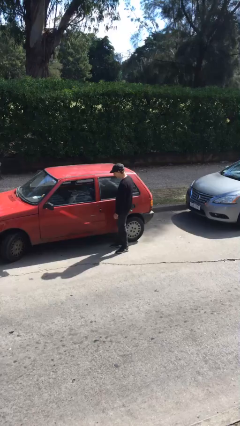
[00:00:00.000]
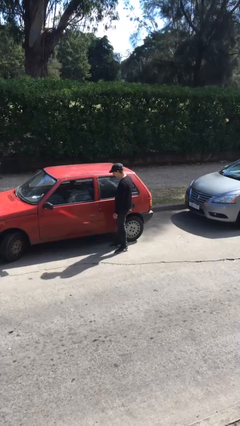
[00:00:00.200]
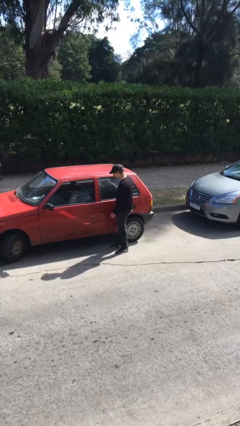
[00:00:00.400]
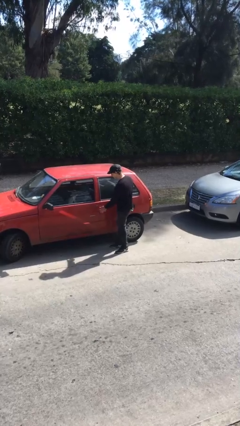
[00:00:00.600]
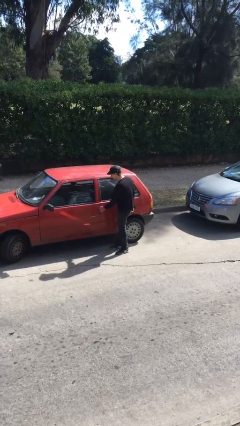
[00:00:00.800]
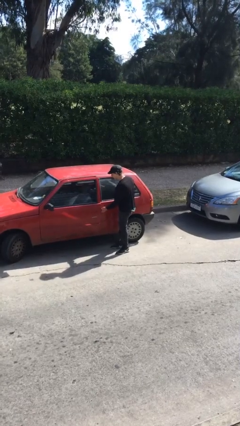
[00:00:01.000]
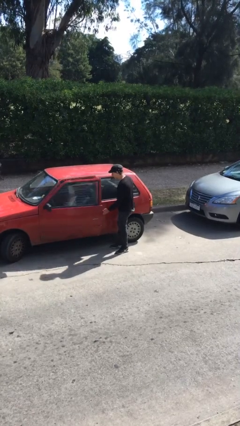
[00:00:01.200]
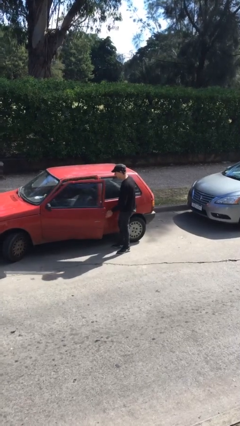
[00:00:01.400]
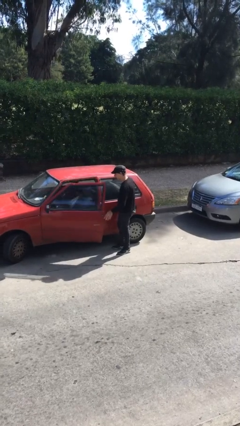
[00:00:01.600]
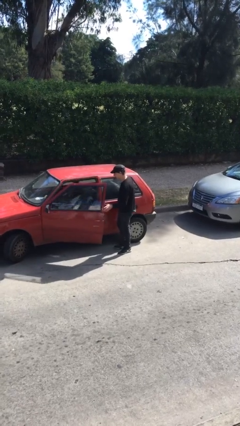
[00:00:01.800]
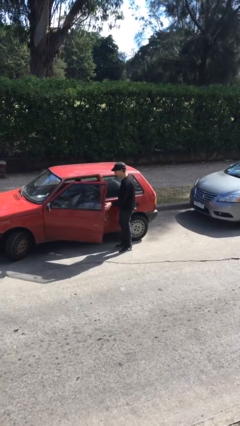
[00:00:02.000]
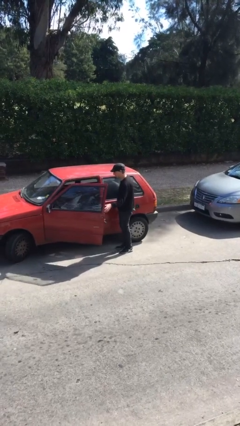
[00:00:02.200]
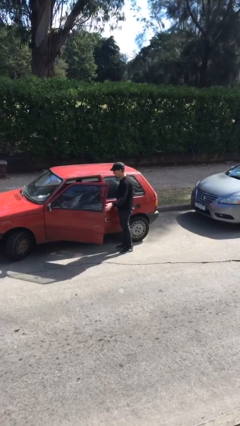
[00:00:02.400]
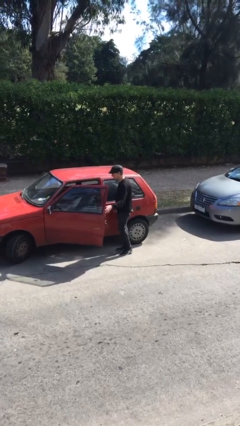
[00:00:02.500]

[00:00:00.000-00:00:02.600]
person opens car door

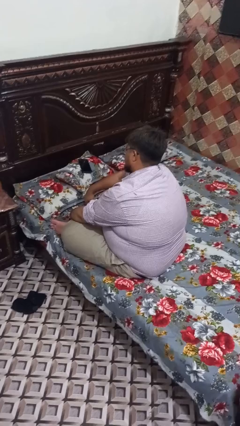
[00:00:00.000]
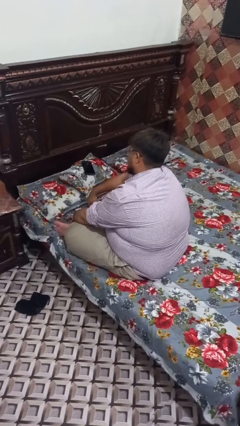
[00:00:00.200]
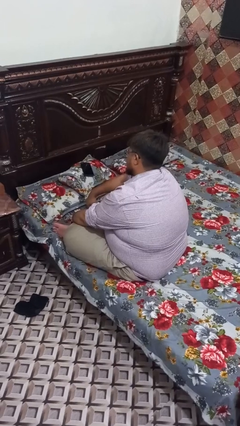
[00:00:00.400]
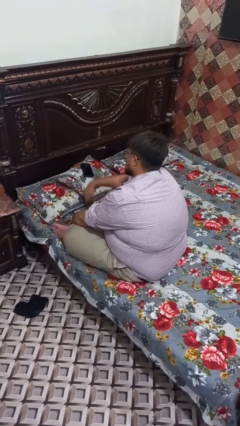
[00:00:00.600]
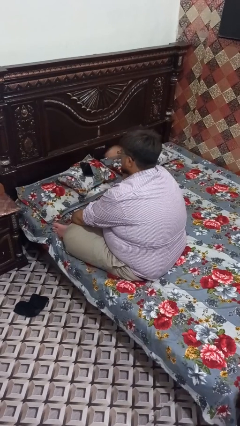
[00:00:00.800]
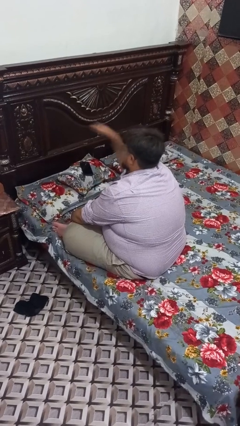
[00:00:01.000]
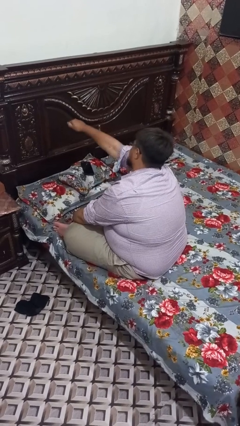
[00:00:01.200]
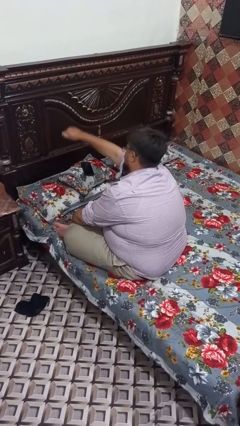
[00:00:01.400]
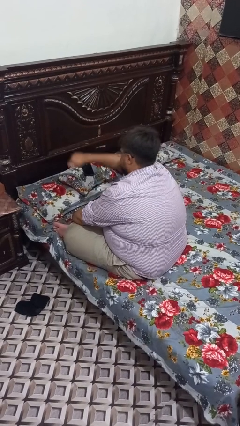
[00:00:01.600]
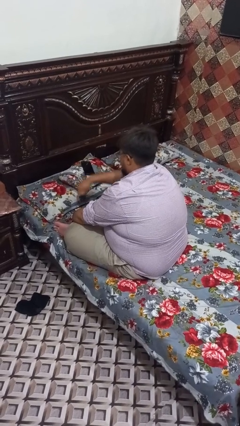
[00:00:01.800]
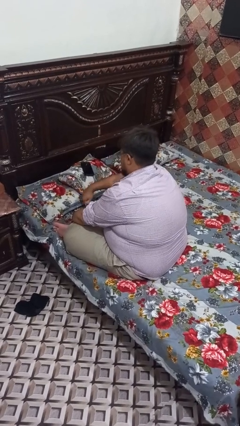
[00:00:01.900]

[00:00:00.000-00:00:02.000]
person punches

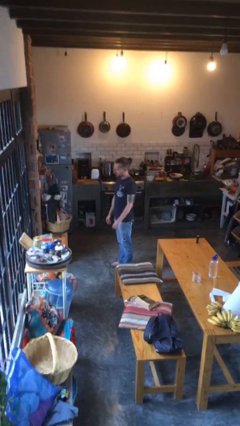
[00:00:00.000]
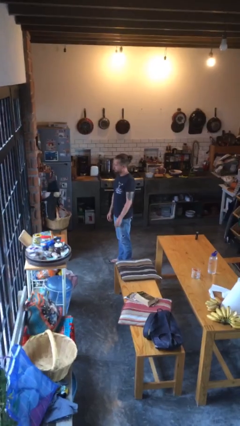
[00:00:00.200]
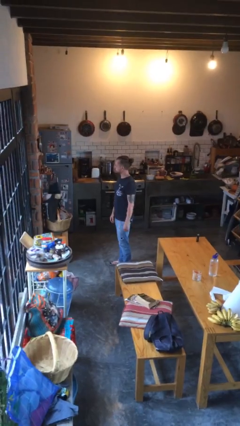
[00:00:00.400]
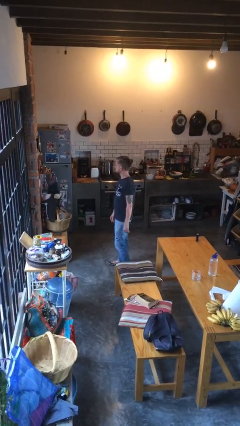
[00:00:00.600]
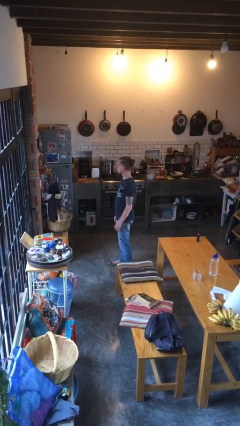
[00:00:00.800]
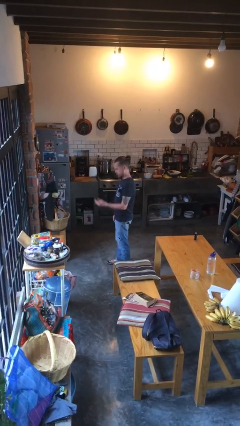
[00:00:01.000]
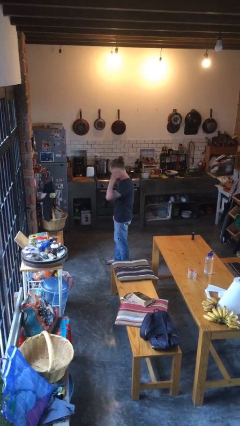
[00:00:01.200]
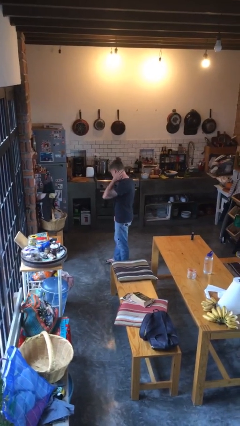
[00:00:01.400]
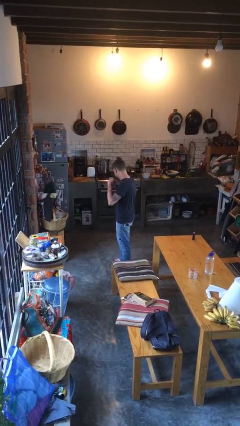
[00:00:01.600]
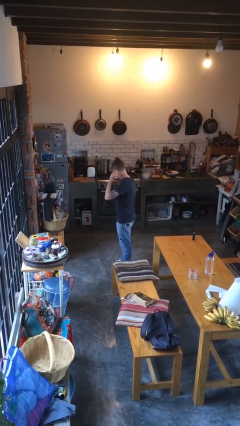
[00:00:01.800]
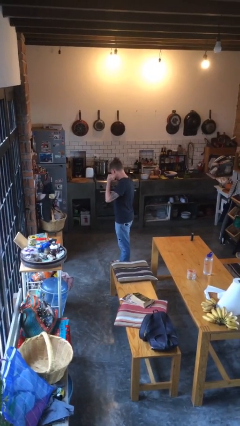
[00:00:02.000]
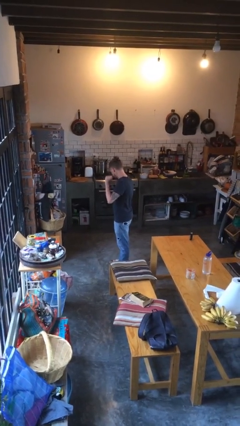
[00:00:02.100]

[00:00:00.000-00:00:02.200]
person swats bug

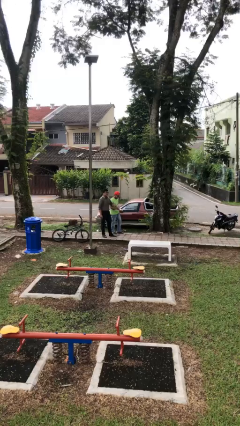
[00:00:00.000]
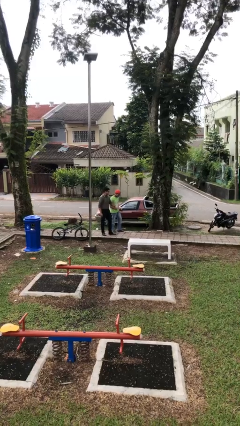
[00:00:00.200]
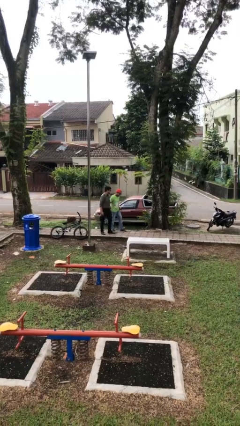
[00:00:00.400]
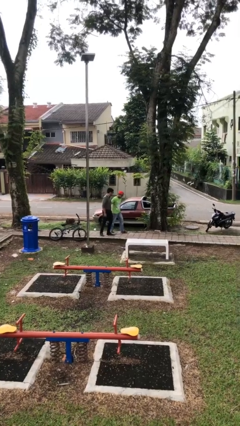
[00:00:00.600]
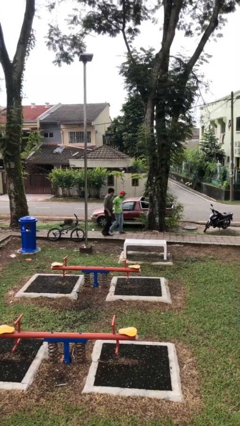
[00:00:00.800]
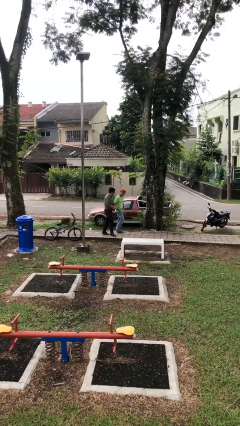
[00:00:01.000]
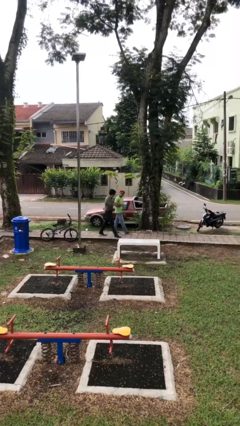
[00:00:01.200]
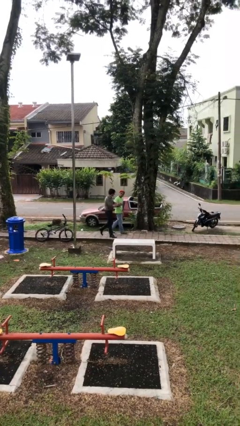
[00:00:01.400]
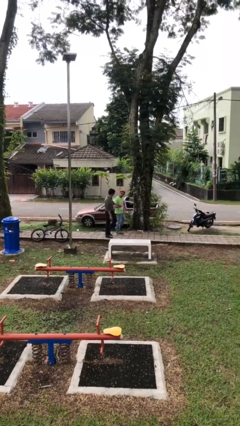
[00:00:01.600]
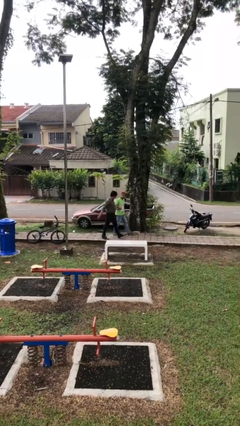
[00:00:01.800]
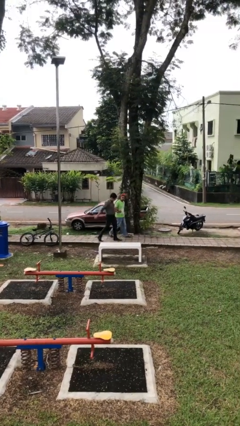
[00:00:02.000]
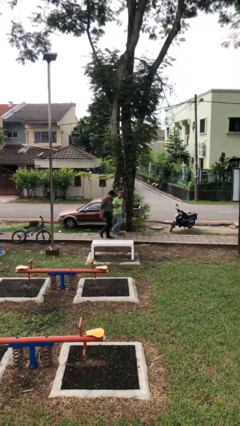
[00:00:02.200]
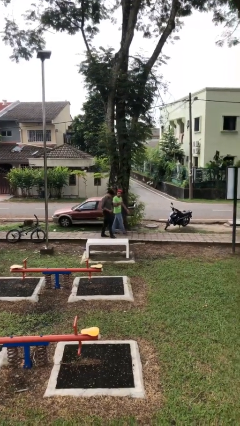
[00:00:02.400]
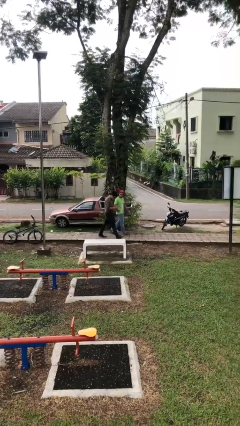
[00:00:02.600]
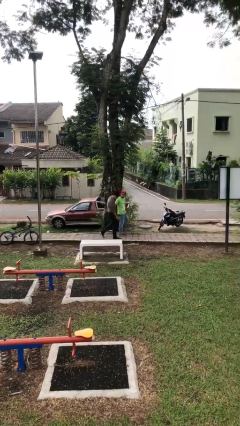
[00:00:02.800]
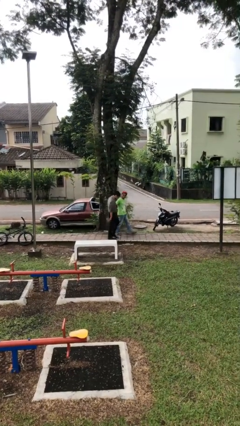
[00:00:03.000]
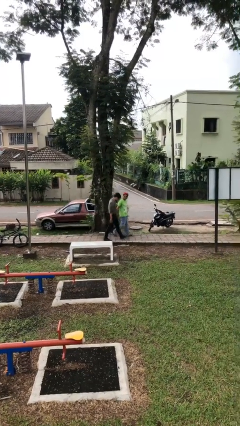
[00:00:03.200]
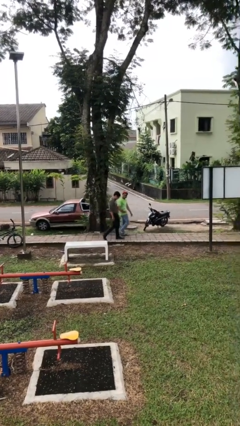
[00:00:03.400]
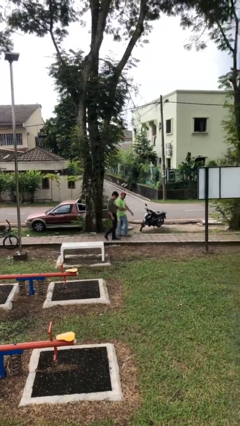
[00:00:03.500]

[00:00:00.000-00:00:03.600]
person holds hand

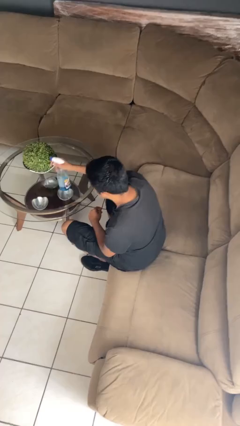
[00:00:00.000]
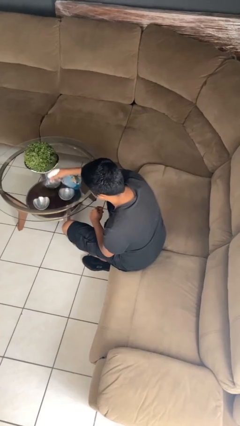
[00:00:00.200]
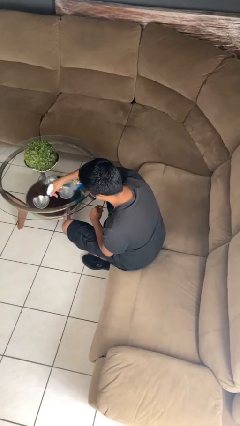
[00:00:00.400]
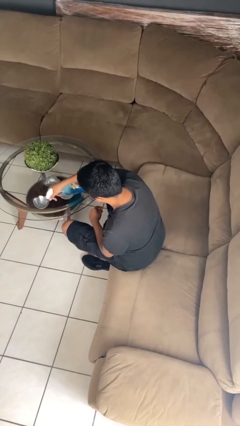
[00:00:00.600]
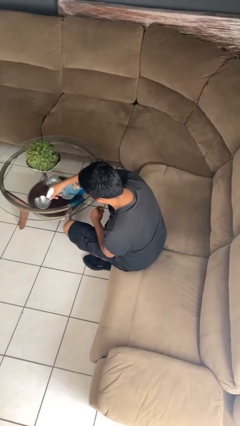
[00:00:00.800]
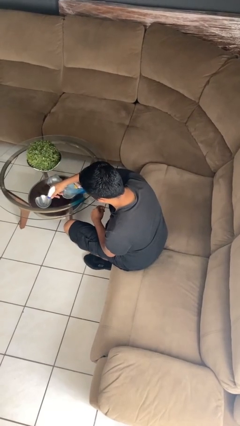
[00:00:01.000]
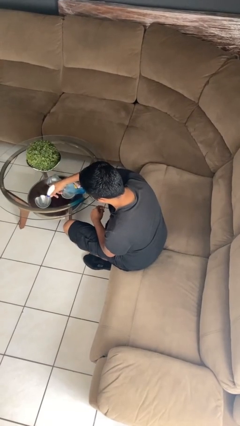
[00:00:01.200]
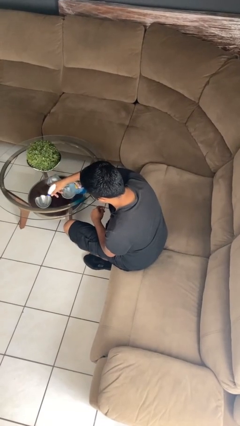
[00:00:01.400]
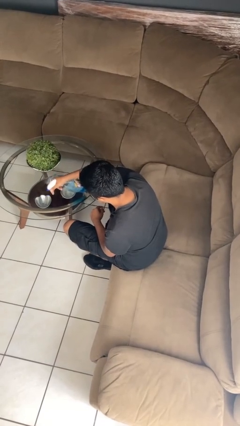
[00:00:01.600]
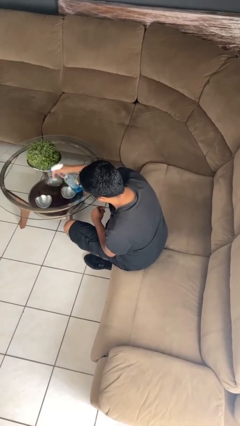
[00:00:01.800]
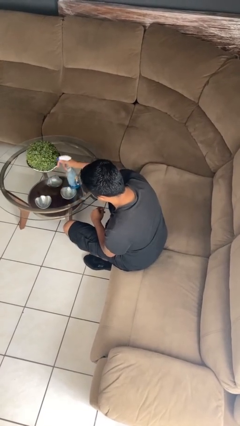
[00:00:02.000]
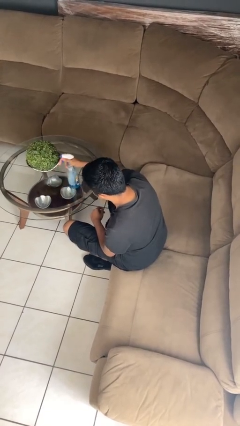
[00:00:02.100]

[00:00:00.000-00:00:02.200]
person sprays from bottle

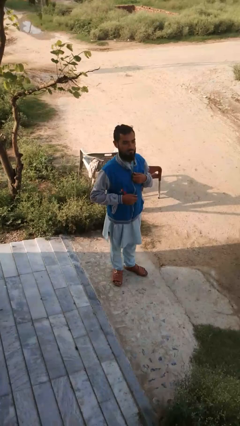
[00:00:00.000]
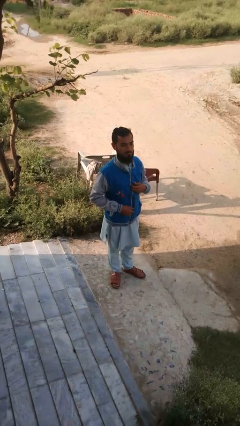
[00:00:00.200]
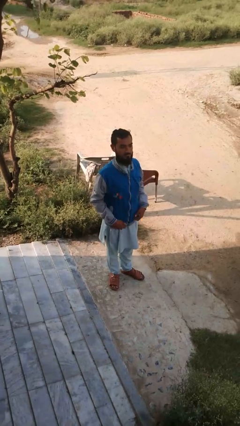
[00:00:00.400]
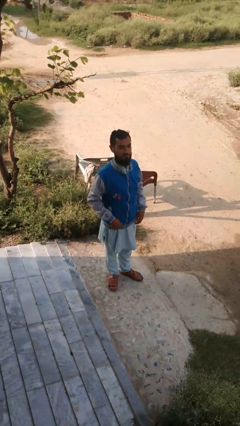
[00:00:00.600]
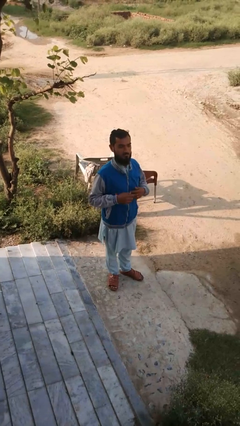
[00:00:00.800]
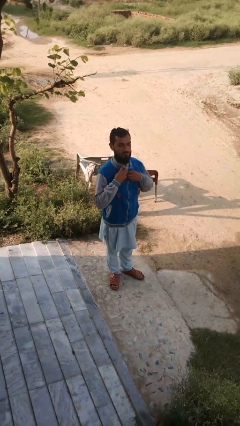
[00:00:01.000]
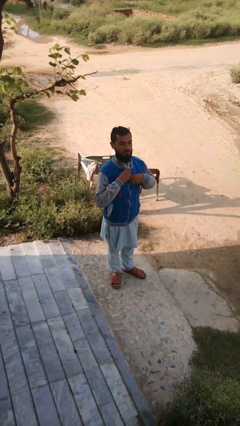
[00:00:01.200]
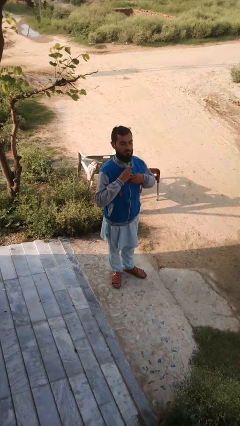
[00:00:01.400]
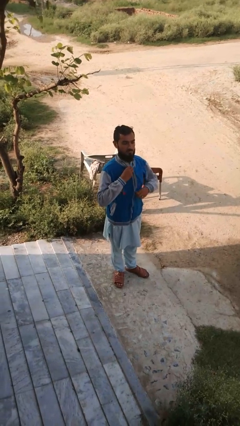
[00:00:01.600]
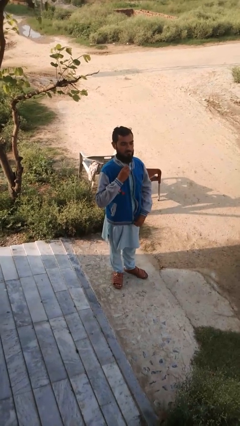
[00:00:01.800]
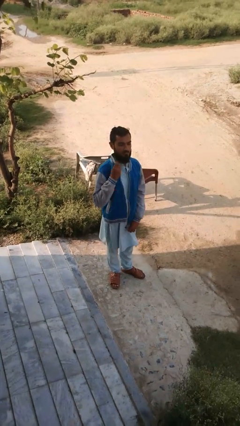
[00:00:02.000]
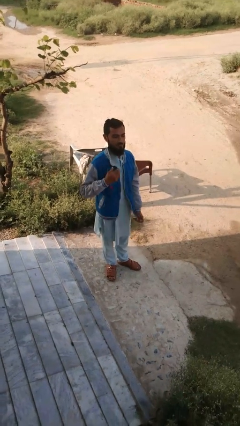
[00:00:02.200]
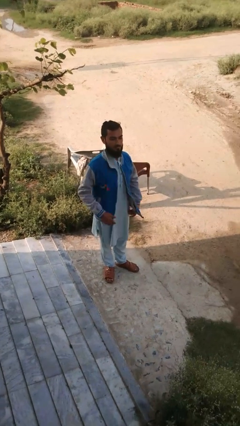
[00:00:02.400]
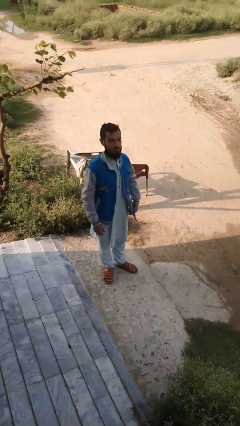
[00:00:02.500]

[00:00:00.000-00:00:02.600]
person unzips jacket

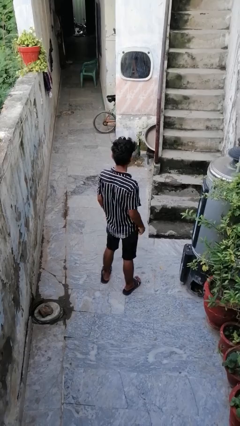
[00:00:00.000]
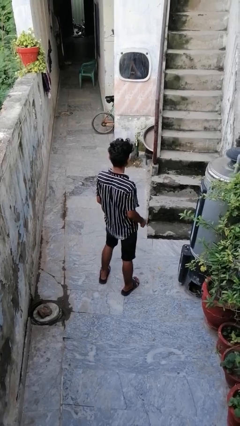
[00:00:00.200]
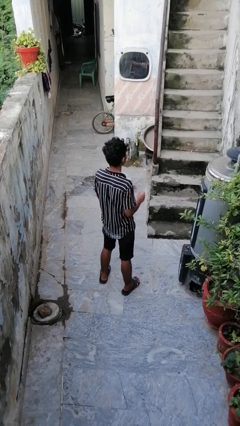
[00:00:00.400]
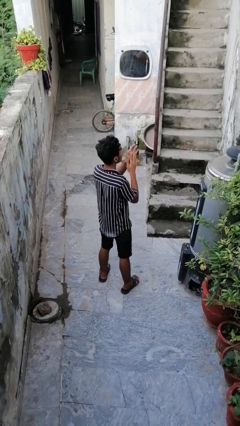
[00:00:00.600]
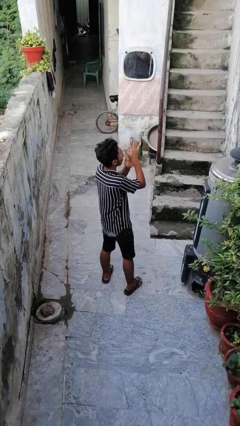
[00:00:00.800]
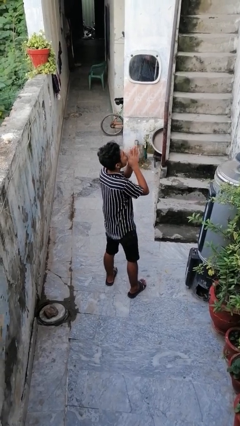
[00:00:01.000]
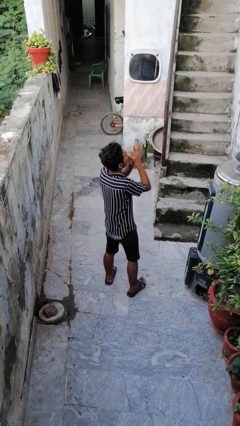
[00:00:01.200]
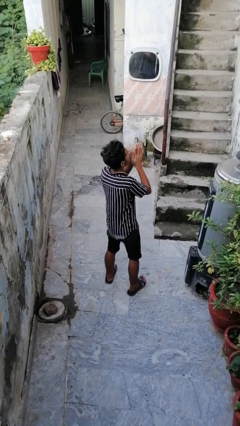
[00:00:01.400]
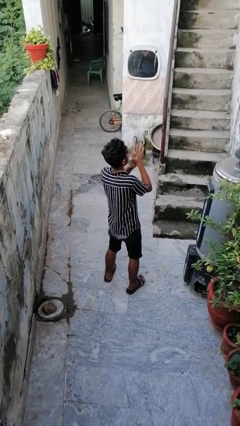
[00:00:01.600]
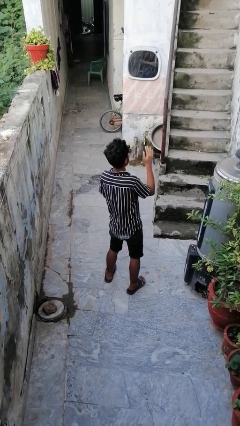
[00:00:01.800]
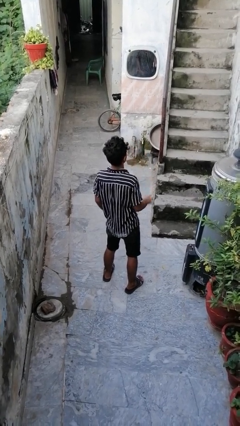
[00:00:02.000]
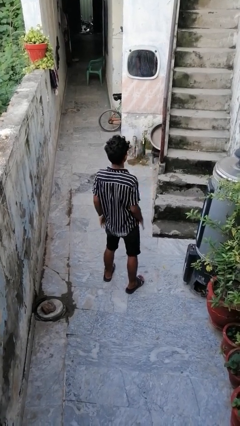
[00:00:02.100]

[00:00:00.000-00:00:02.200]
person blows into hands
